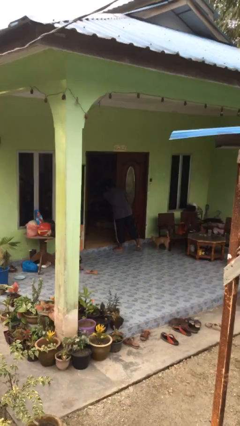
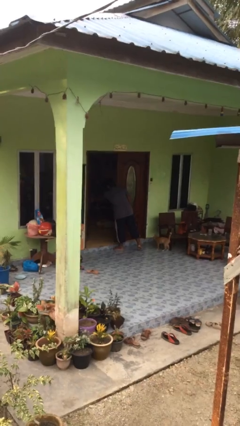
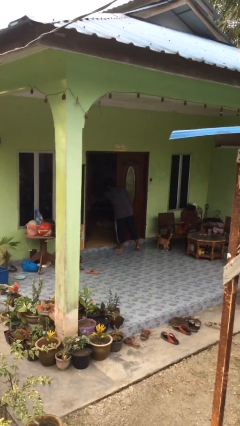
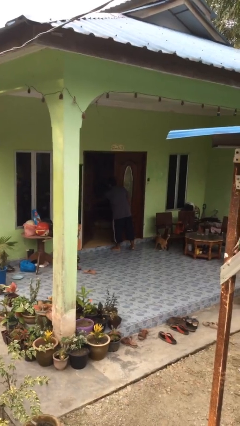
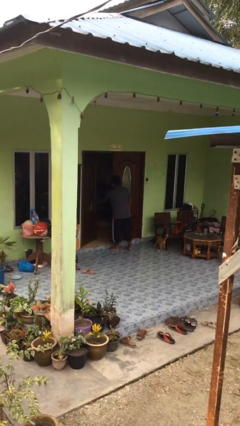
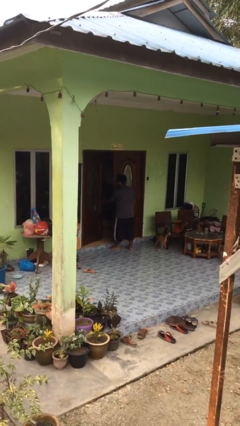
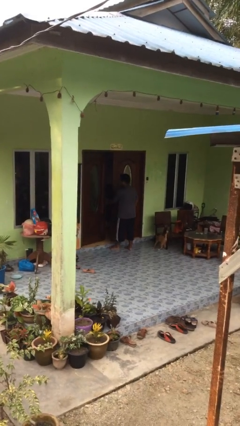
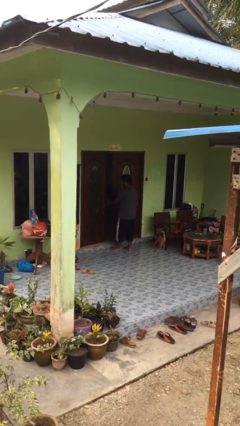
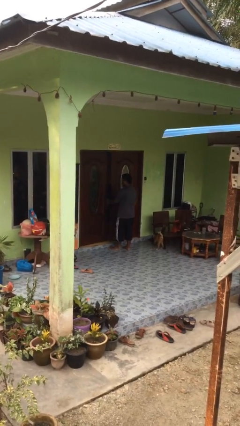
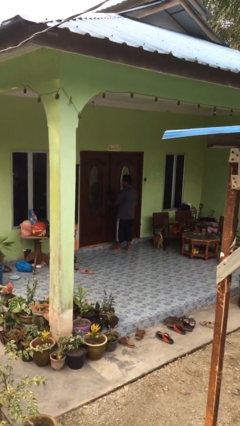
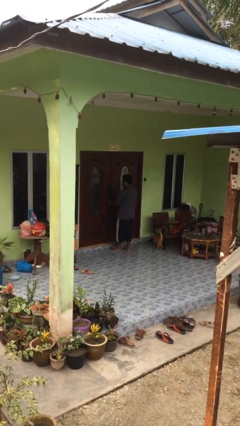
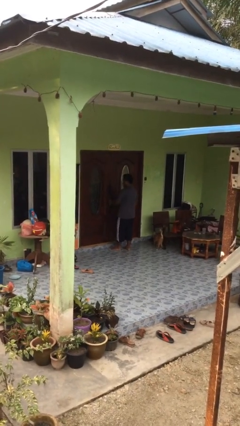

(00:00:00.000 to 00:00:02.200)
person closes facility door

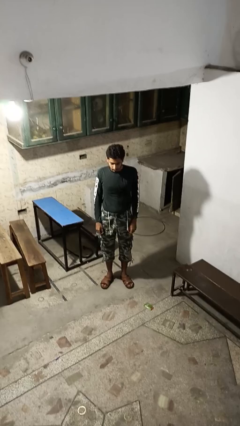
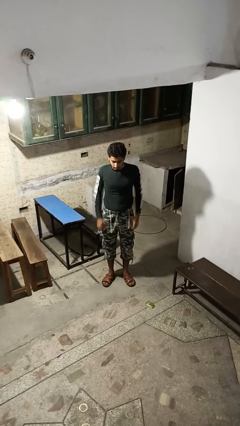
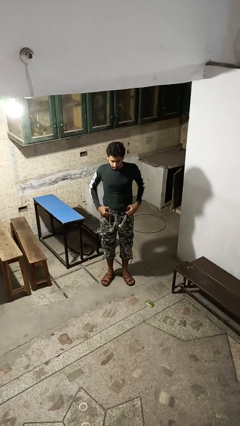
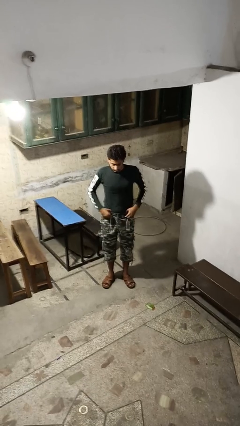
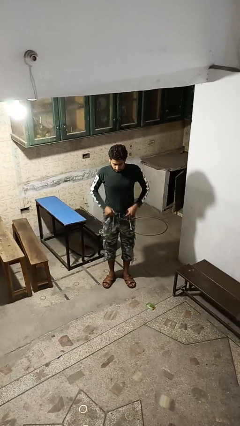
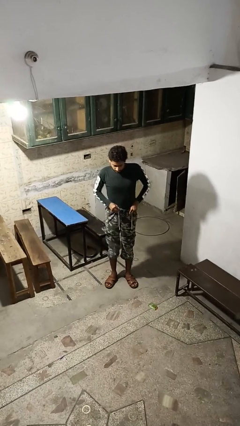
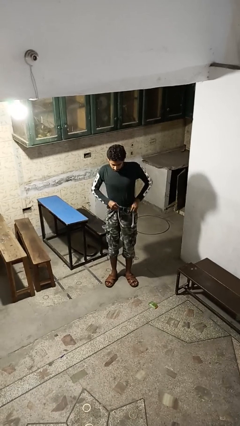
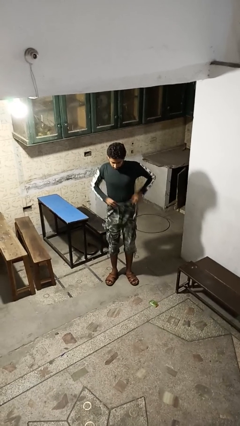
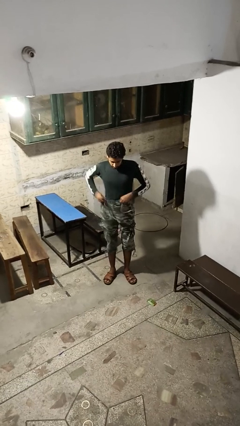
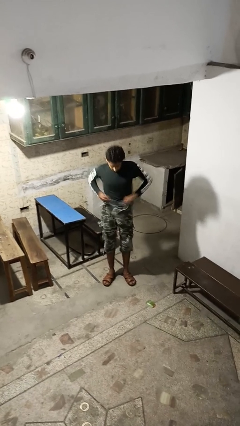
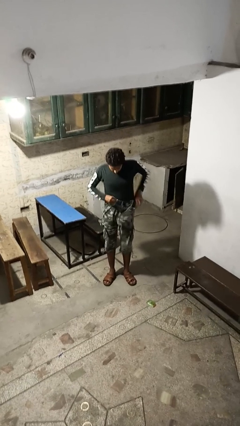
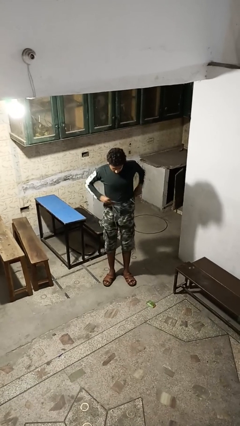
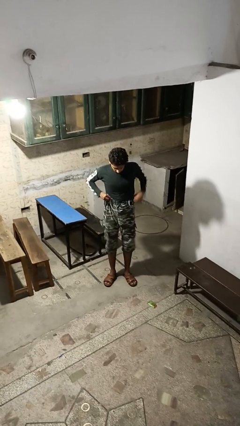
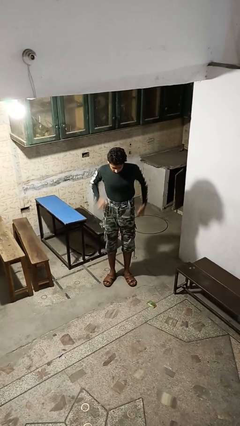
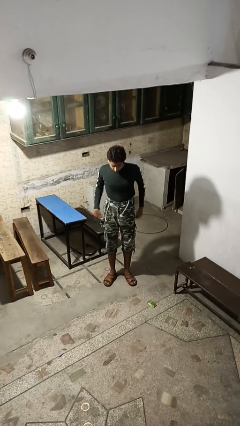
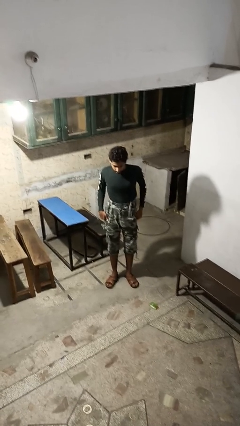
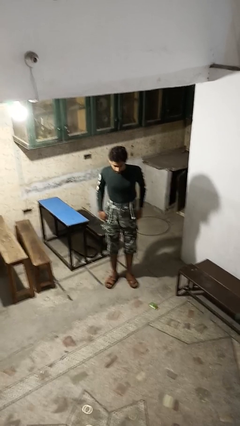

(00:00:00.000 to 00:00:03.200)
person hikes up pants

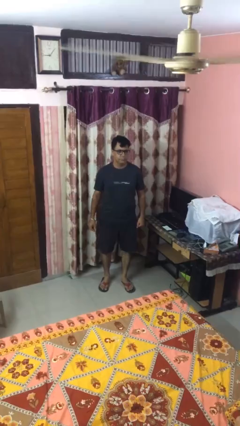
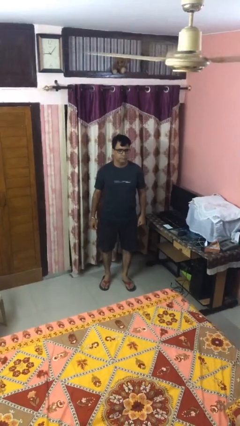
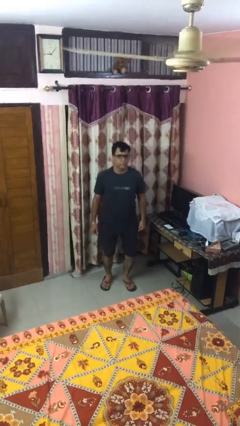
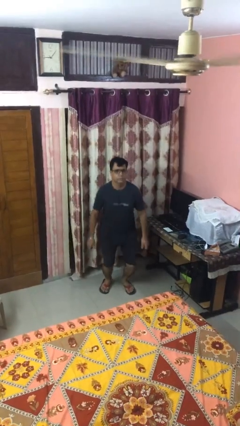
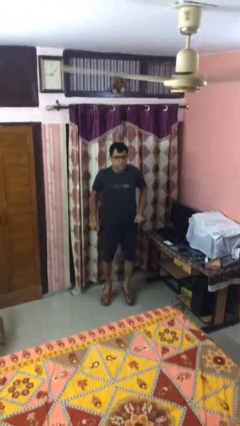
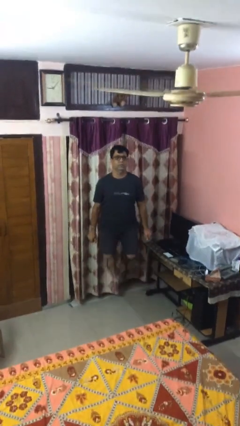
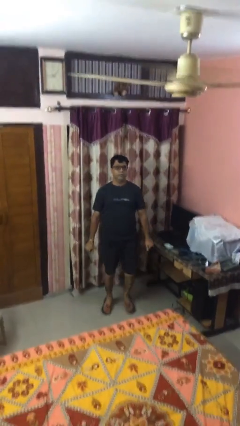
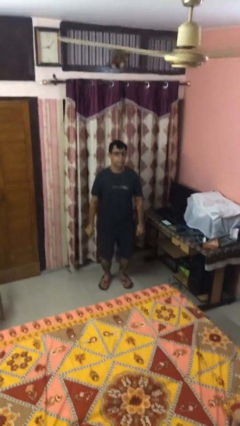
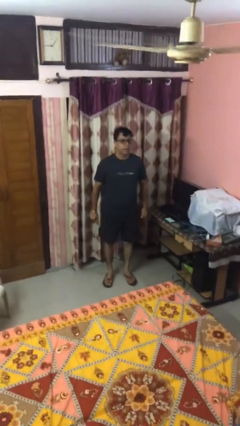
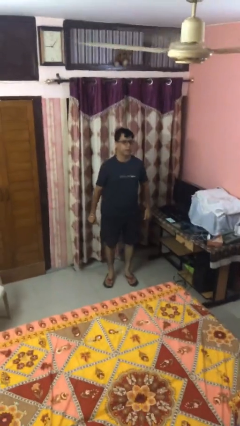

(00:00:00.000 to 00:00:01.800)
person jumps

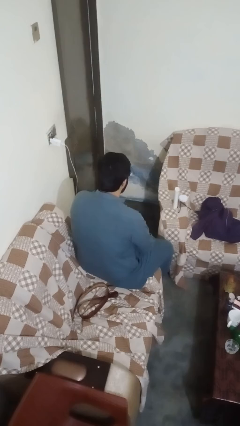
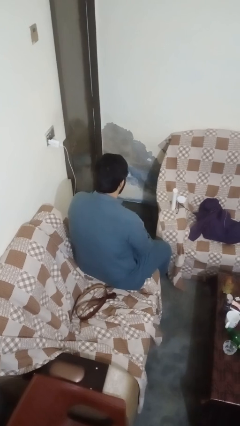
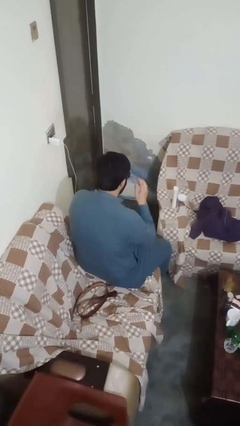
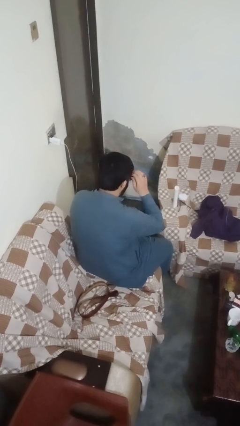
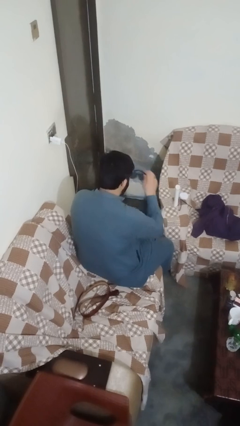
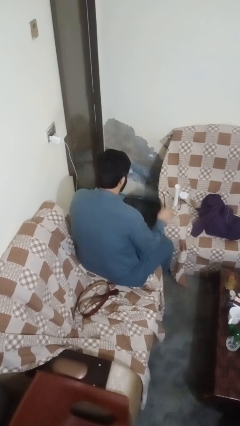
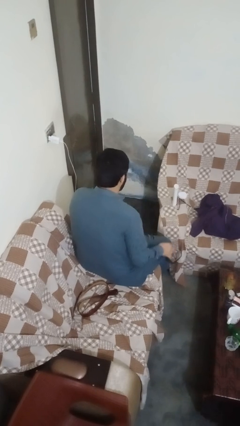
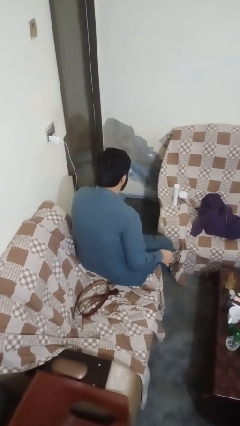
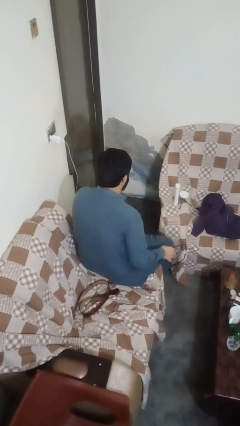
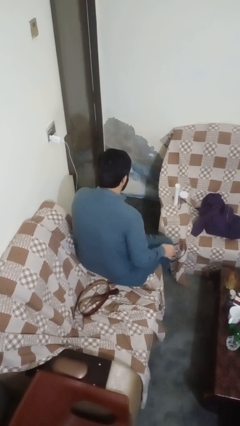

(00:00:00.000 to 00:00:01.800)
person takes off sunglasses

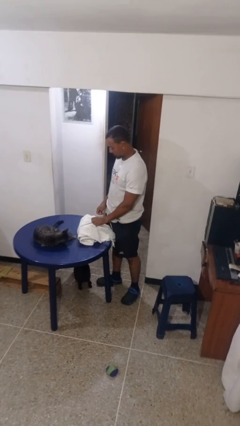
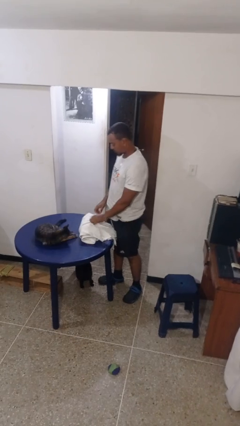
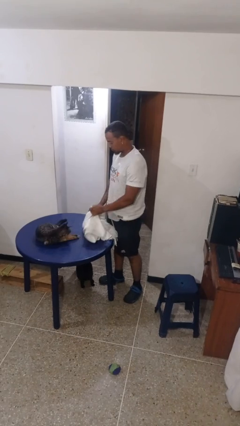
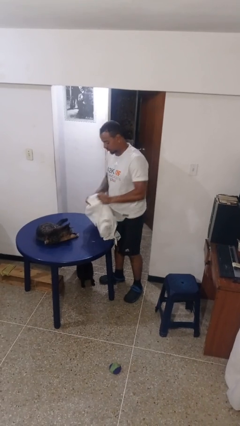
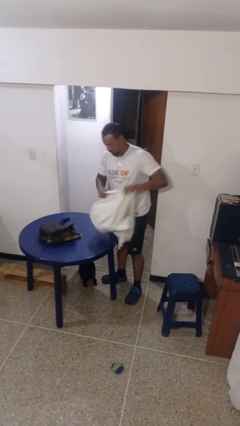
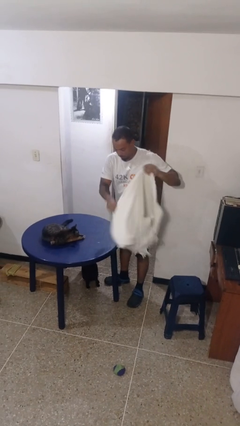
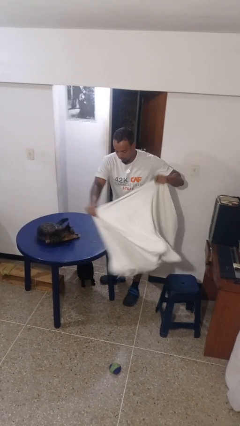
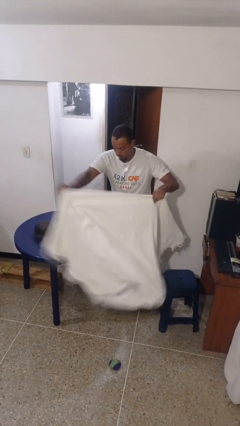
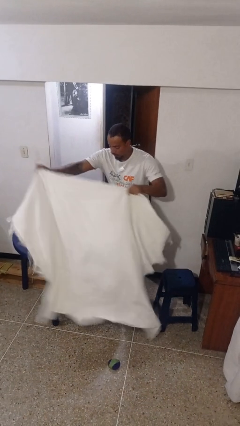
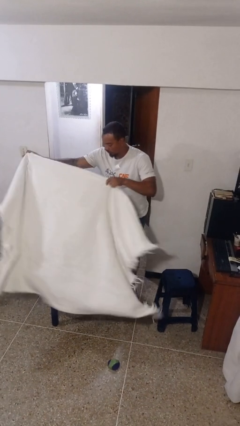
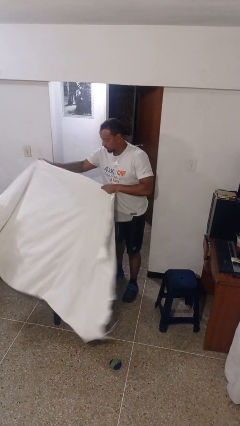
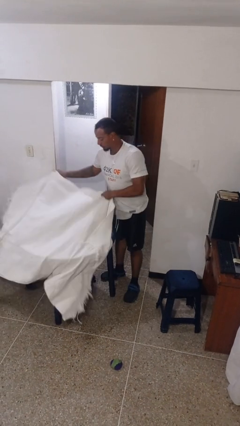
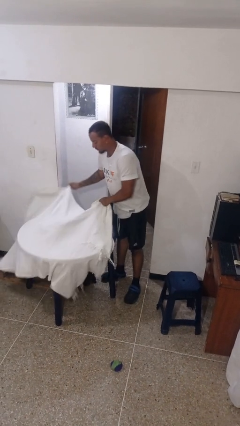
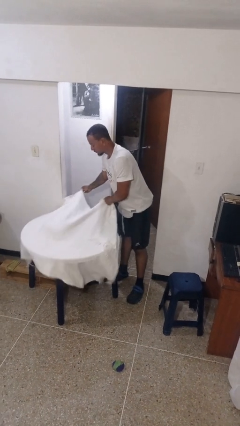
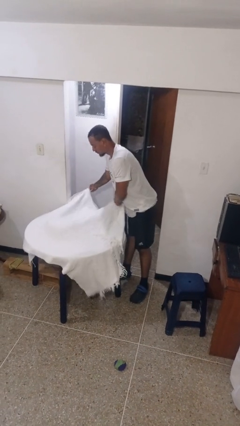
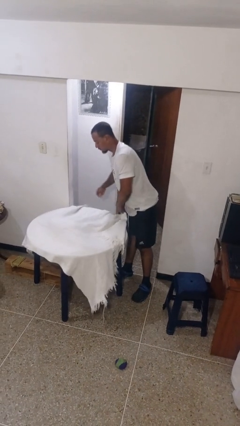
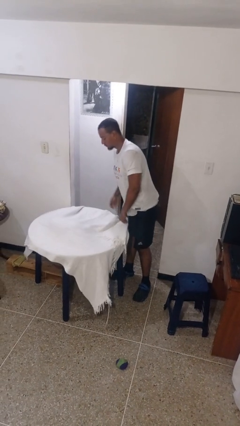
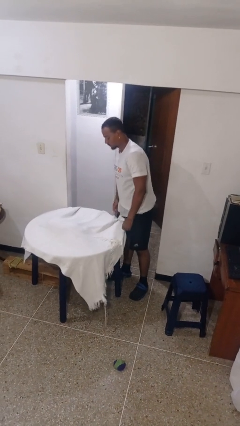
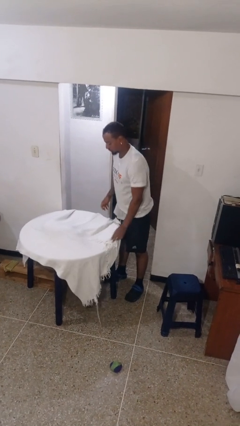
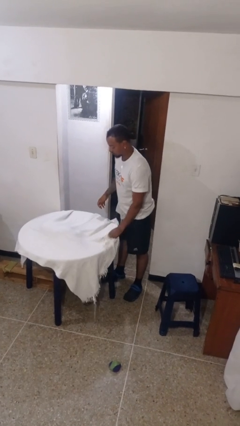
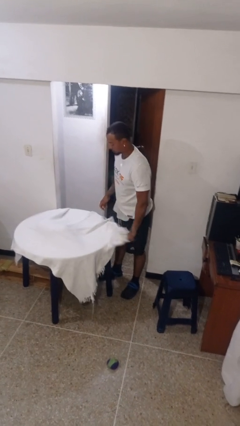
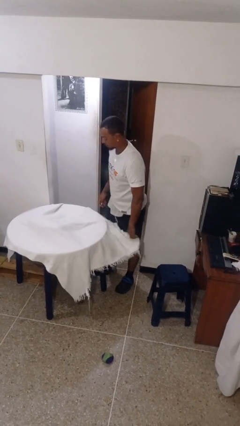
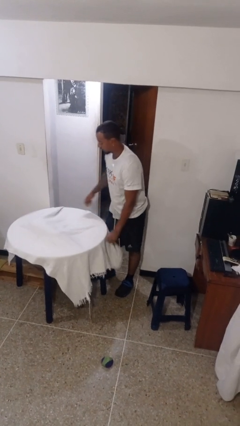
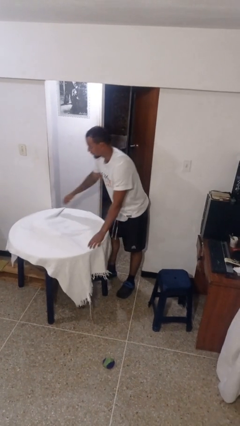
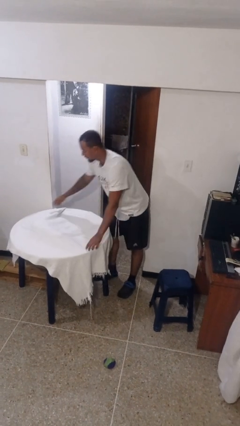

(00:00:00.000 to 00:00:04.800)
person spreads tablecloth

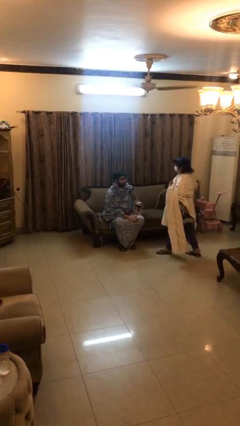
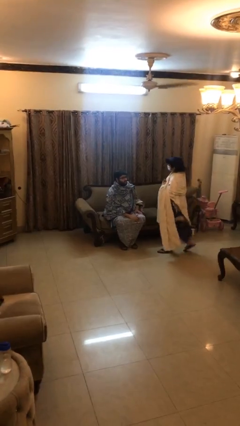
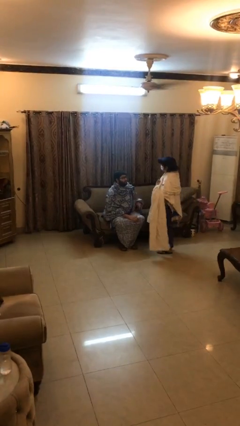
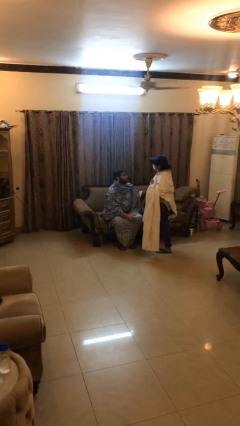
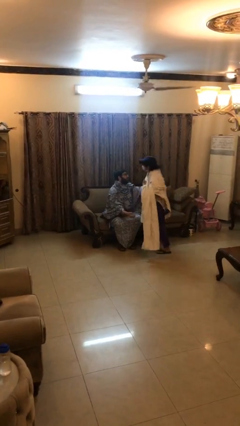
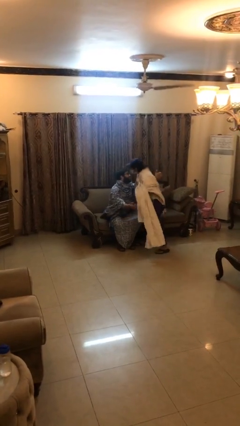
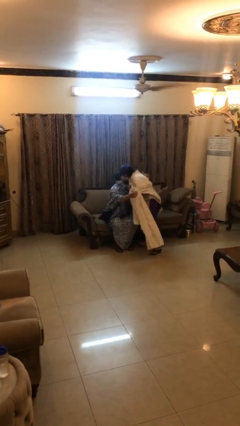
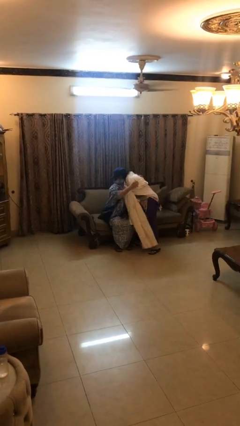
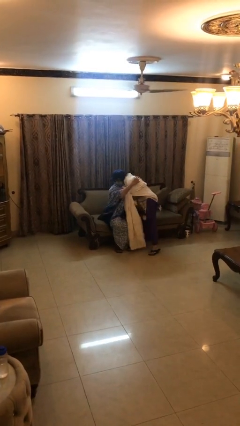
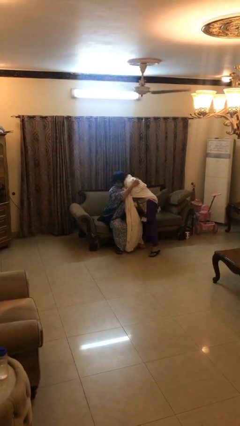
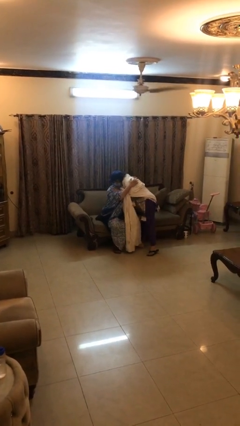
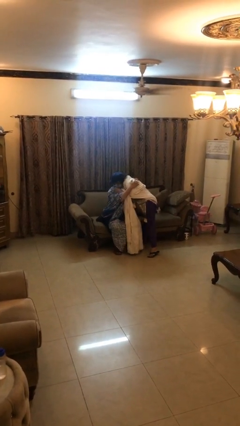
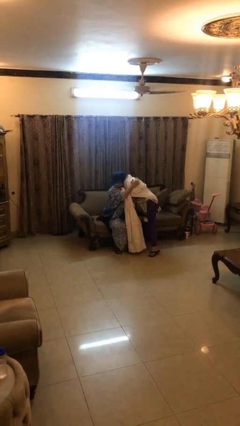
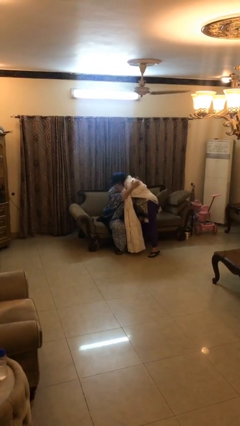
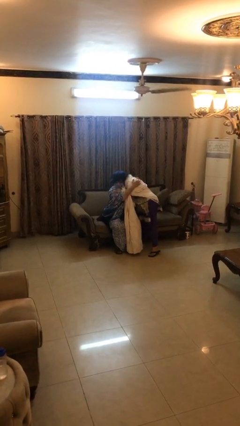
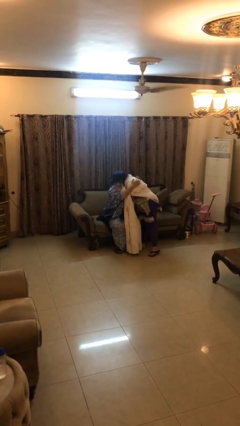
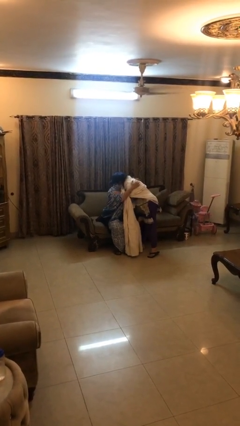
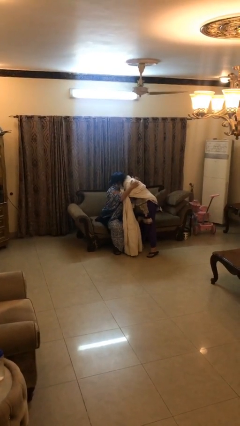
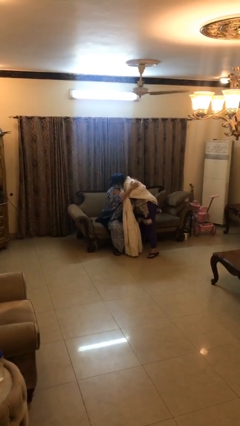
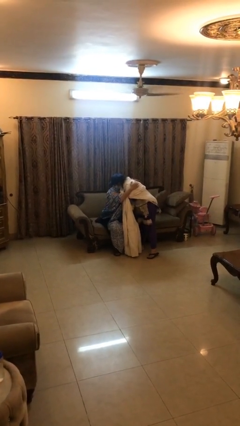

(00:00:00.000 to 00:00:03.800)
person embraces person
